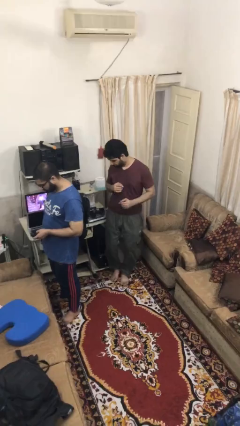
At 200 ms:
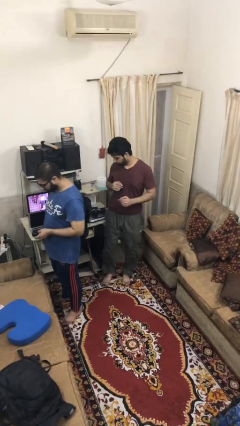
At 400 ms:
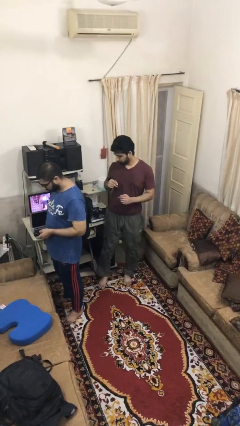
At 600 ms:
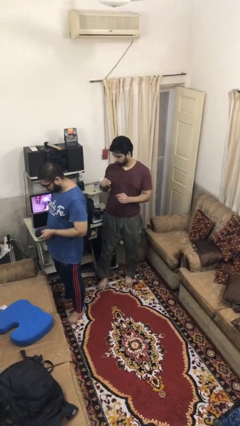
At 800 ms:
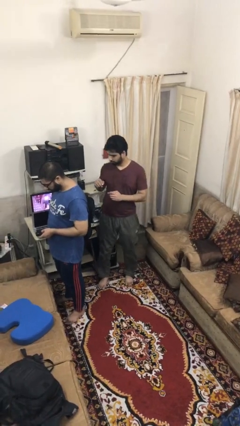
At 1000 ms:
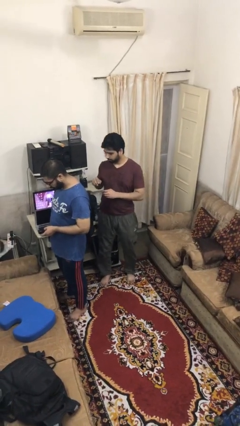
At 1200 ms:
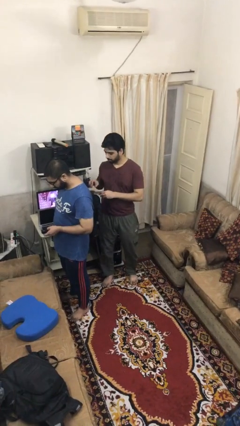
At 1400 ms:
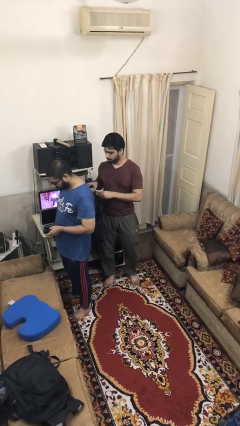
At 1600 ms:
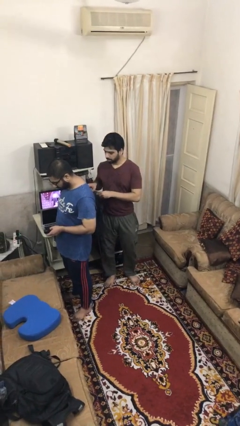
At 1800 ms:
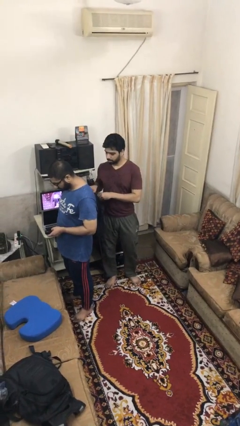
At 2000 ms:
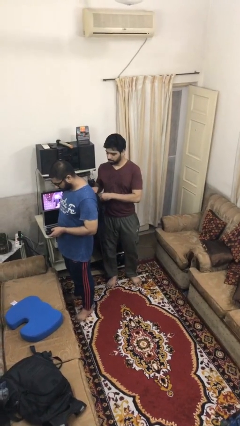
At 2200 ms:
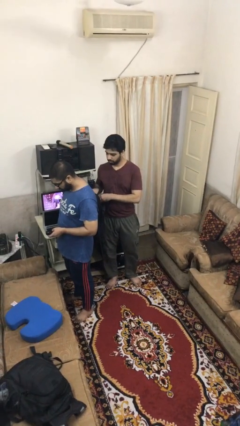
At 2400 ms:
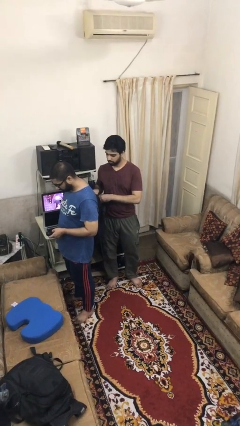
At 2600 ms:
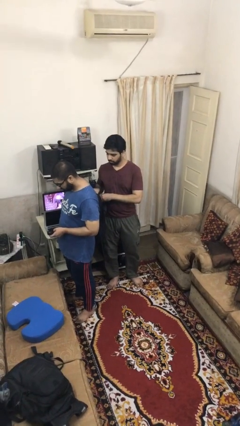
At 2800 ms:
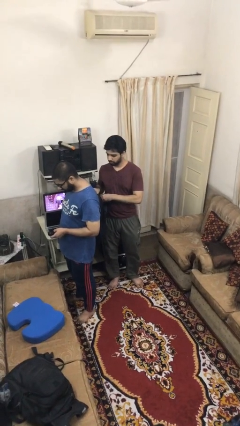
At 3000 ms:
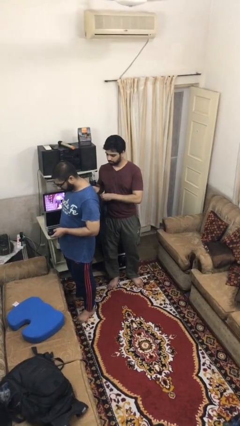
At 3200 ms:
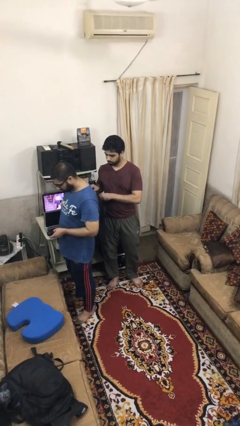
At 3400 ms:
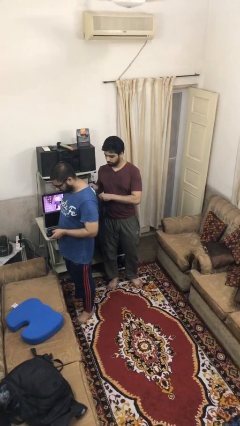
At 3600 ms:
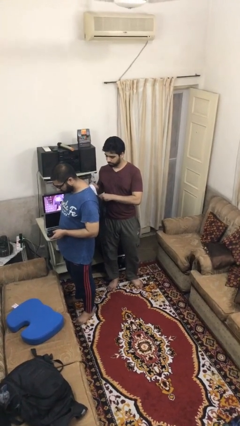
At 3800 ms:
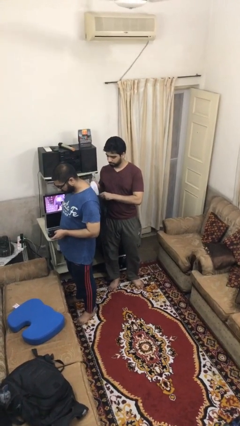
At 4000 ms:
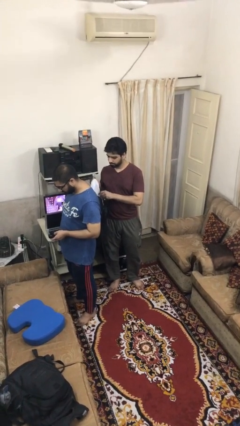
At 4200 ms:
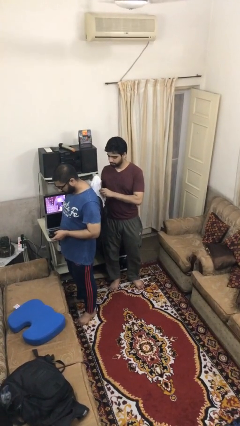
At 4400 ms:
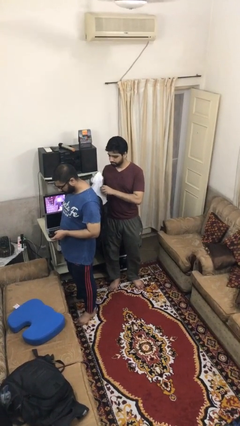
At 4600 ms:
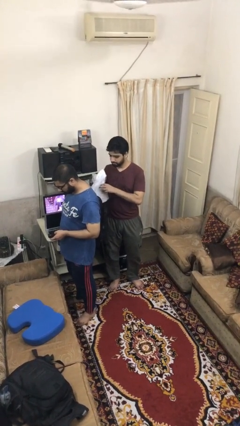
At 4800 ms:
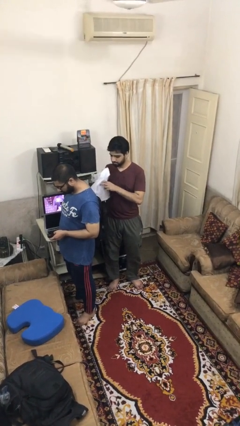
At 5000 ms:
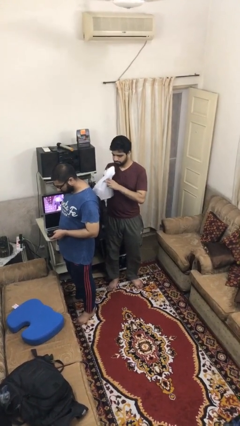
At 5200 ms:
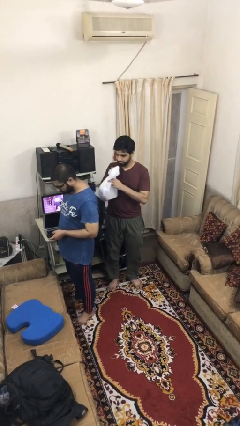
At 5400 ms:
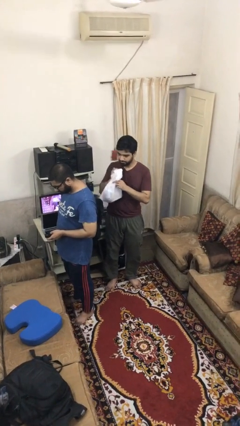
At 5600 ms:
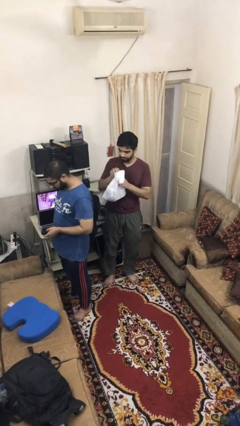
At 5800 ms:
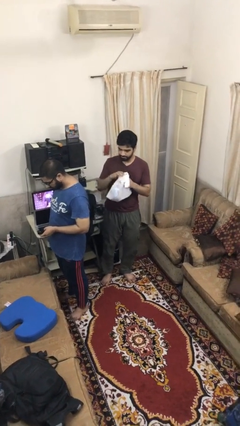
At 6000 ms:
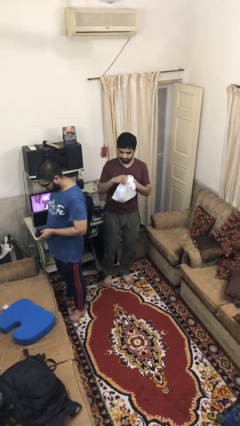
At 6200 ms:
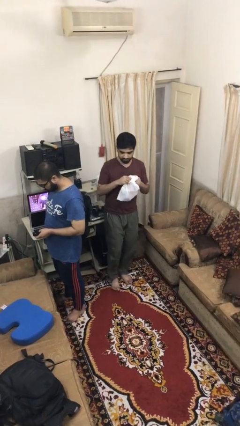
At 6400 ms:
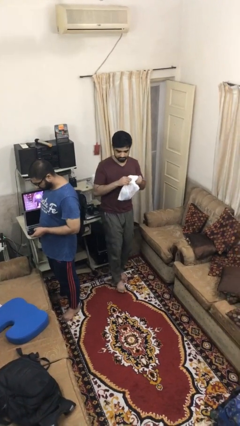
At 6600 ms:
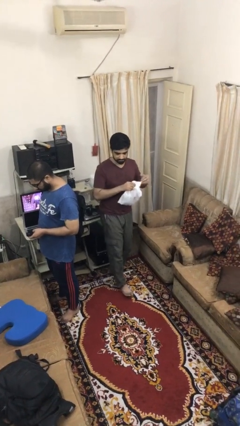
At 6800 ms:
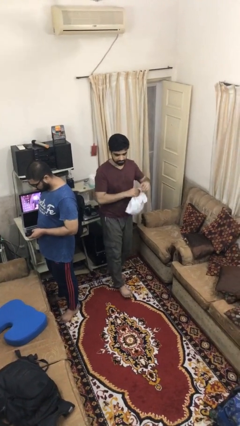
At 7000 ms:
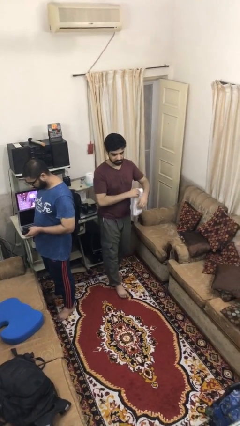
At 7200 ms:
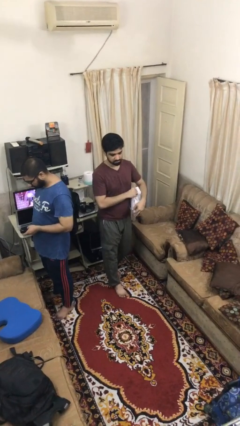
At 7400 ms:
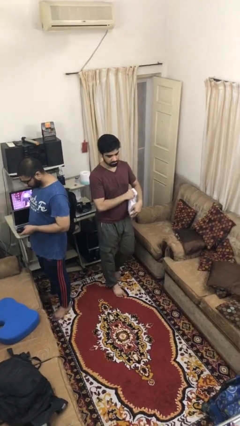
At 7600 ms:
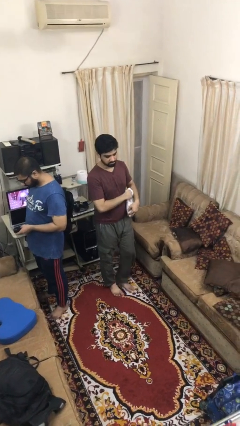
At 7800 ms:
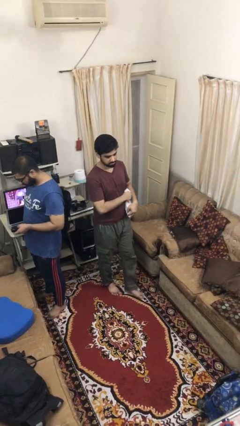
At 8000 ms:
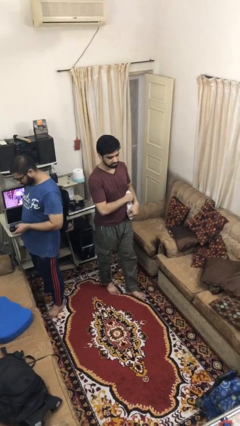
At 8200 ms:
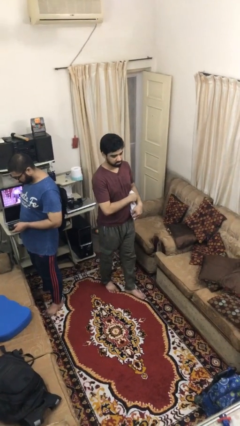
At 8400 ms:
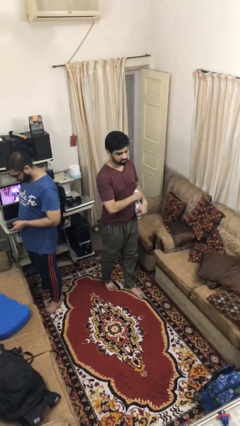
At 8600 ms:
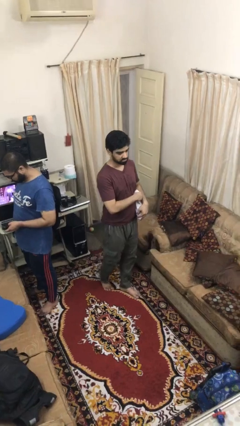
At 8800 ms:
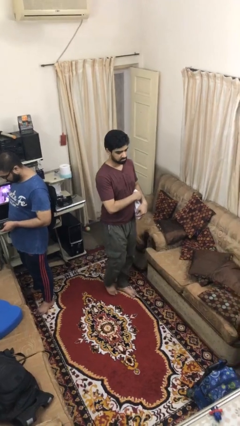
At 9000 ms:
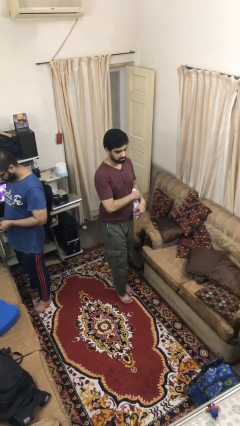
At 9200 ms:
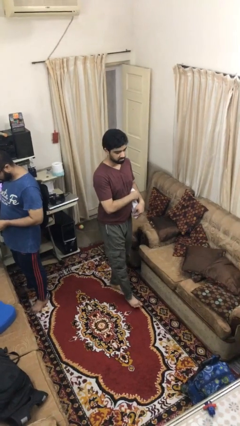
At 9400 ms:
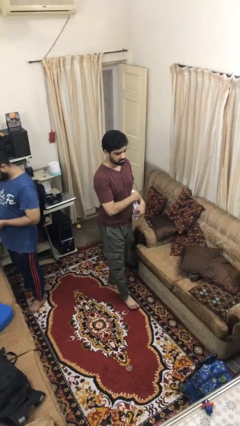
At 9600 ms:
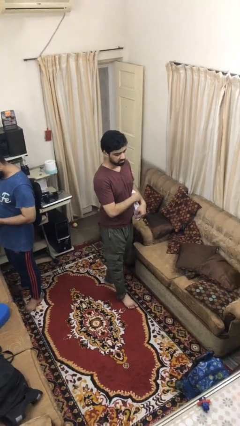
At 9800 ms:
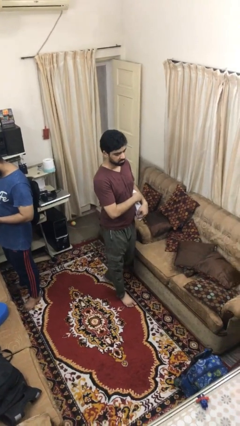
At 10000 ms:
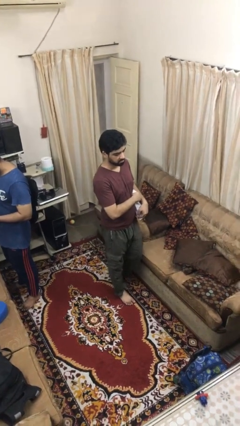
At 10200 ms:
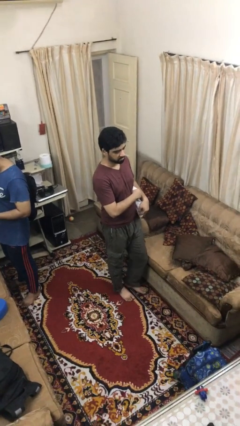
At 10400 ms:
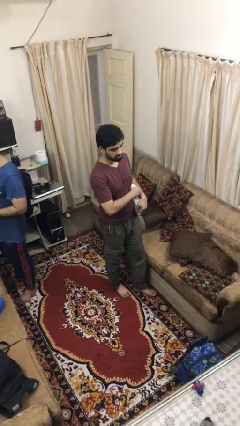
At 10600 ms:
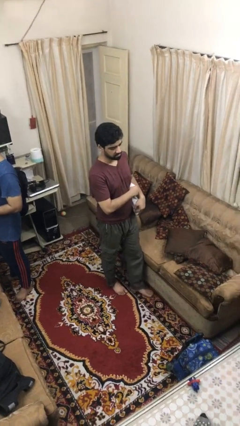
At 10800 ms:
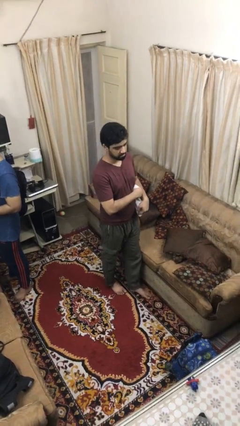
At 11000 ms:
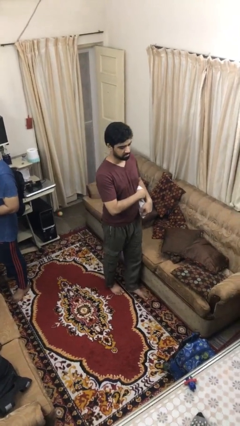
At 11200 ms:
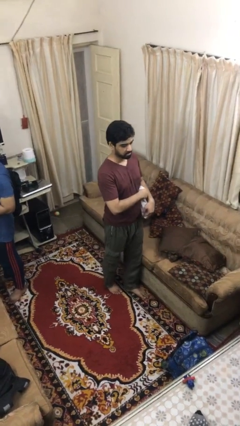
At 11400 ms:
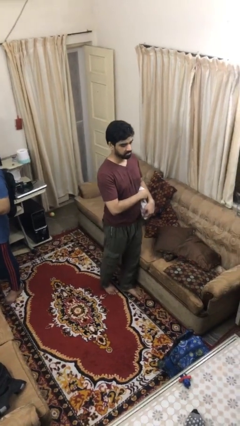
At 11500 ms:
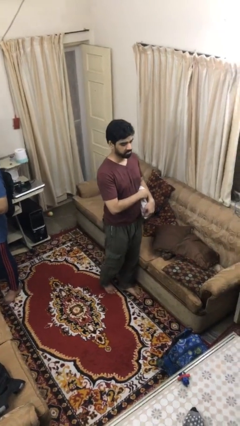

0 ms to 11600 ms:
person steals object from person

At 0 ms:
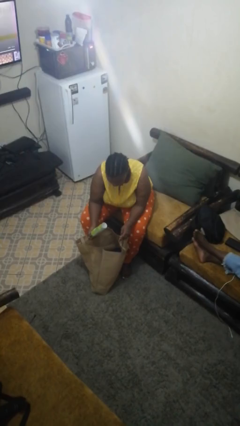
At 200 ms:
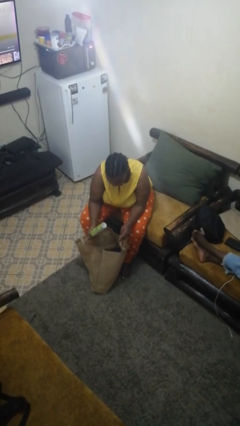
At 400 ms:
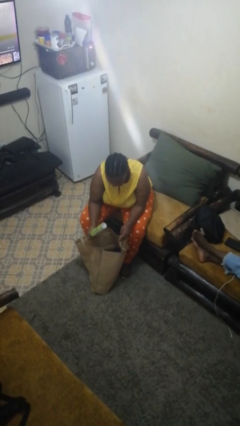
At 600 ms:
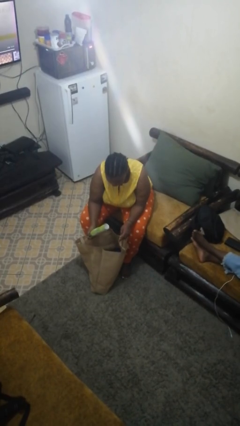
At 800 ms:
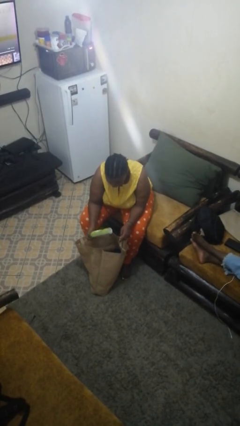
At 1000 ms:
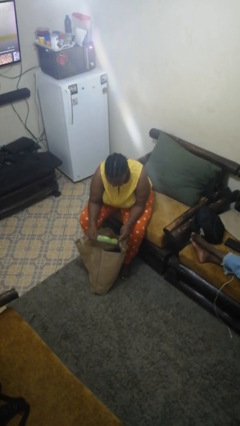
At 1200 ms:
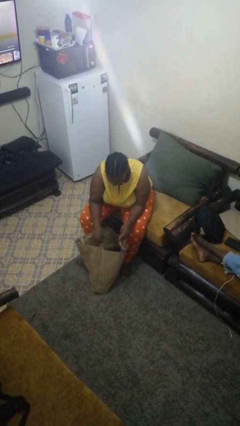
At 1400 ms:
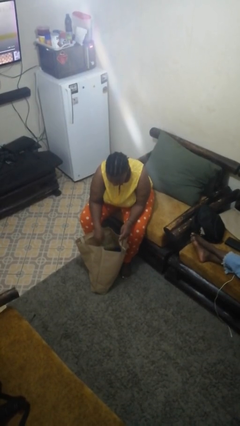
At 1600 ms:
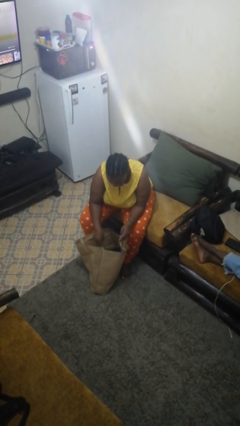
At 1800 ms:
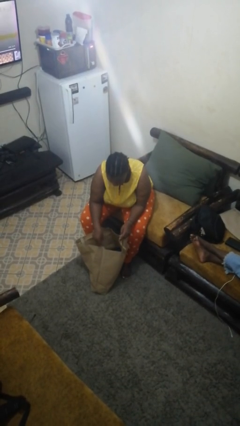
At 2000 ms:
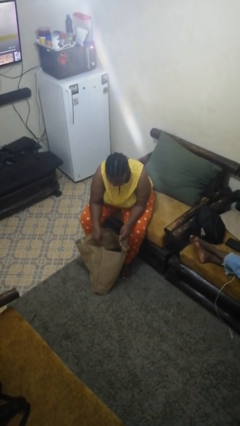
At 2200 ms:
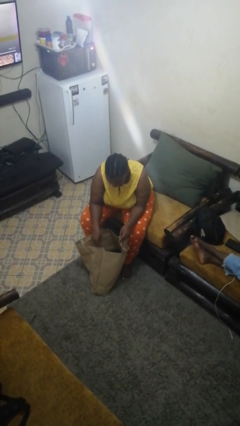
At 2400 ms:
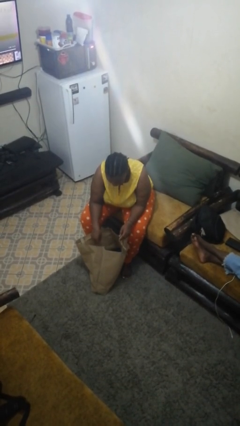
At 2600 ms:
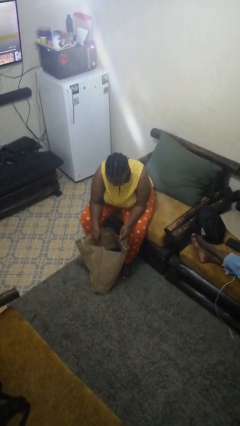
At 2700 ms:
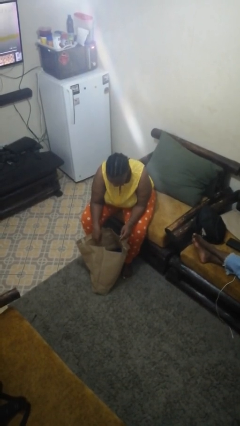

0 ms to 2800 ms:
person puts object into bag

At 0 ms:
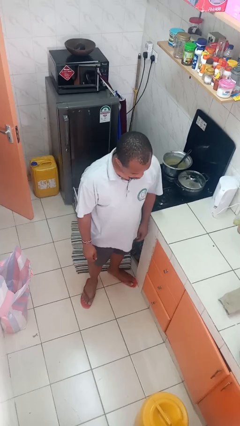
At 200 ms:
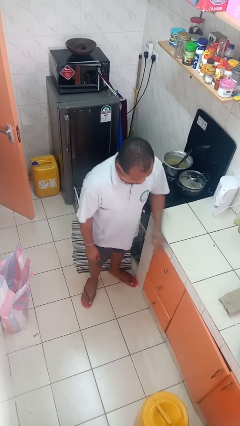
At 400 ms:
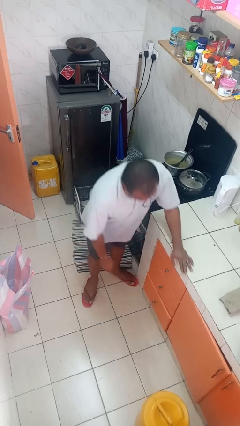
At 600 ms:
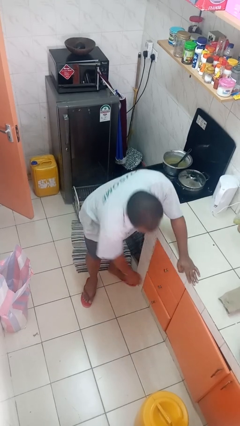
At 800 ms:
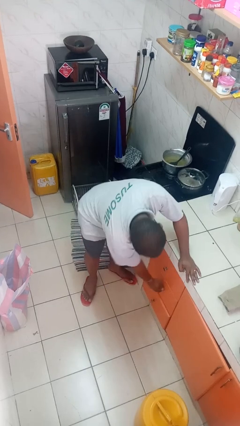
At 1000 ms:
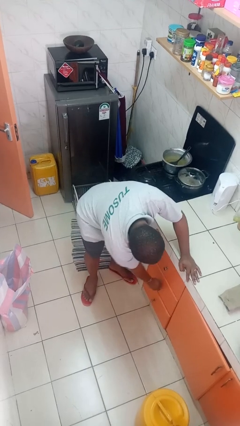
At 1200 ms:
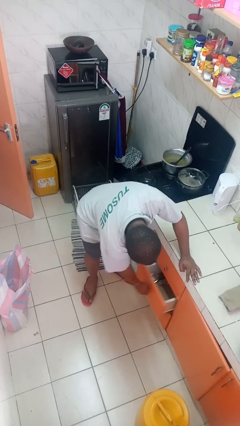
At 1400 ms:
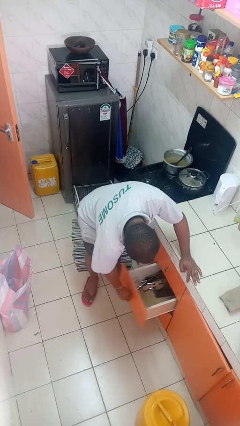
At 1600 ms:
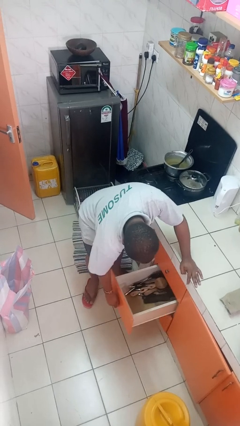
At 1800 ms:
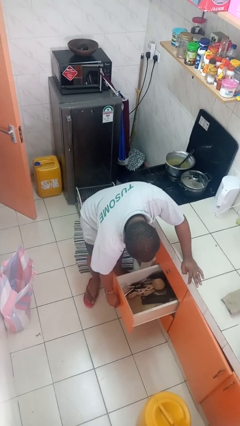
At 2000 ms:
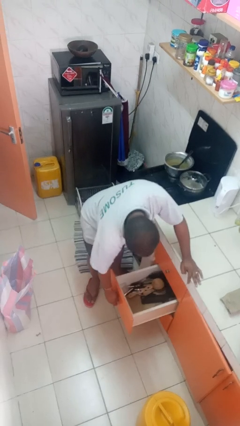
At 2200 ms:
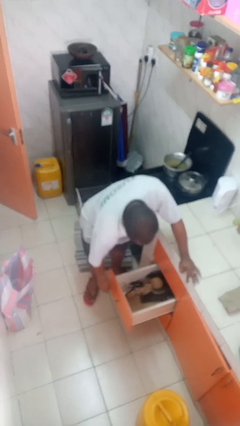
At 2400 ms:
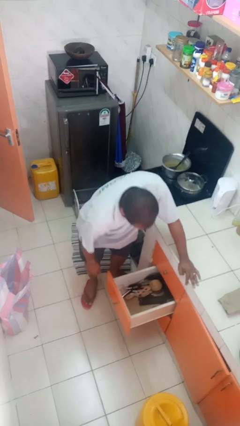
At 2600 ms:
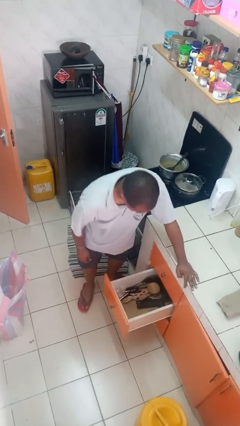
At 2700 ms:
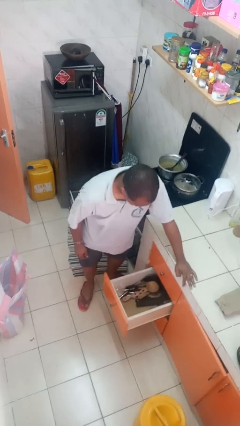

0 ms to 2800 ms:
person opens kitchen drawer

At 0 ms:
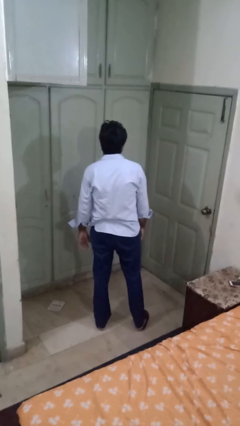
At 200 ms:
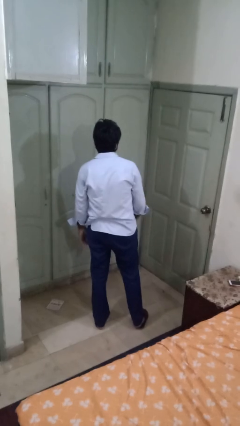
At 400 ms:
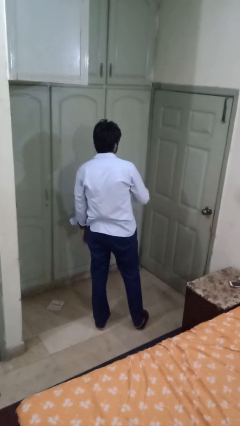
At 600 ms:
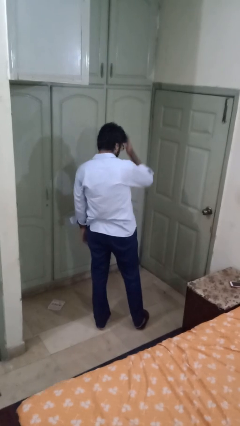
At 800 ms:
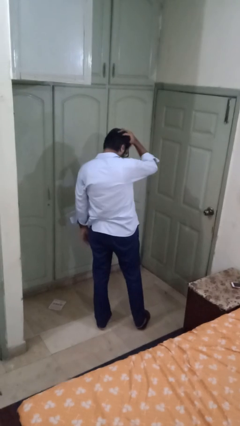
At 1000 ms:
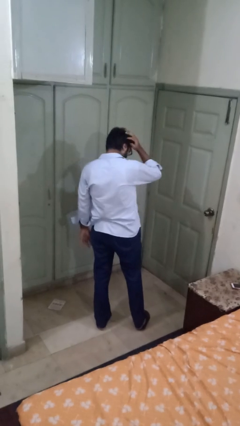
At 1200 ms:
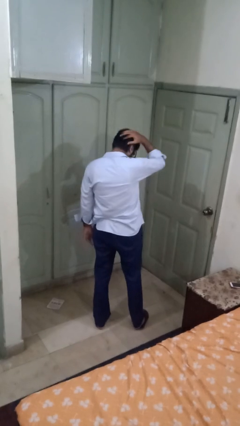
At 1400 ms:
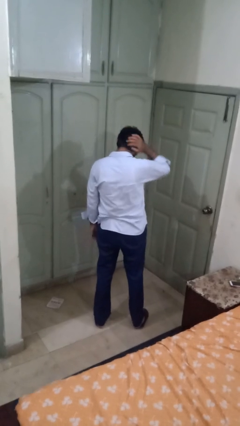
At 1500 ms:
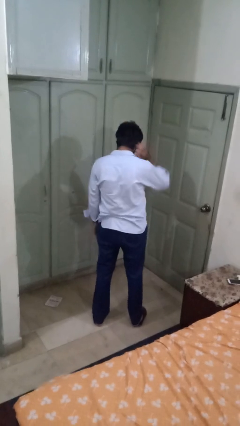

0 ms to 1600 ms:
person strokes hair
